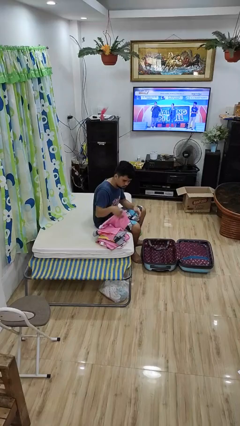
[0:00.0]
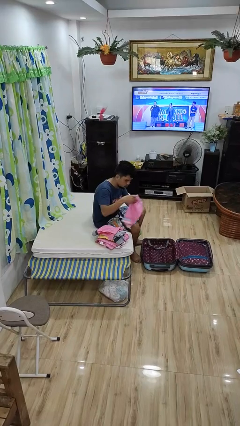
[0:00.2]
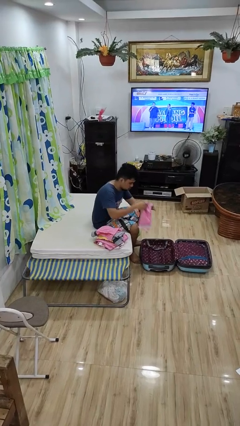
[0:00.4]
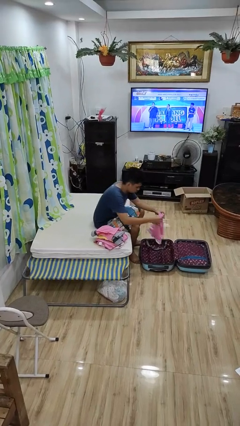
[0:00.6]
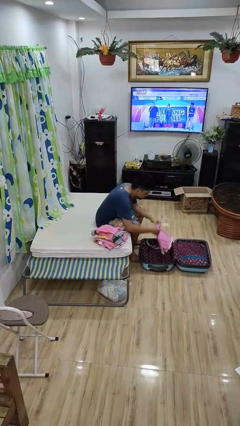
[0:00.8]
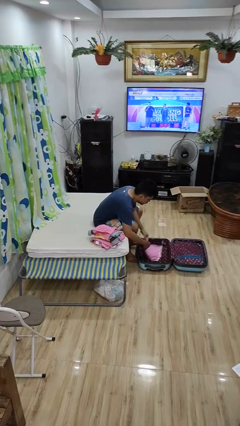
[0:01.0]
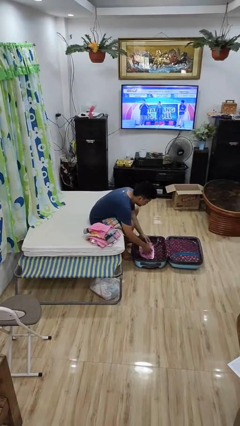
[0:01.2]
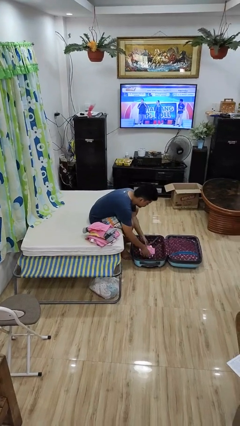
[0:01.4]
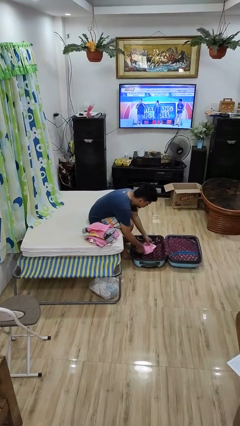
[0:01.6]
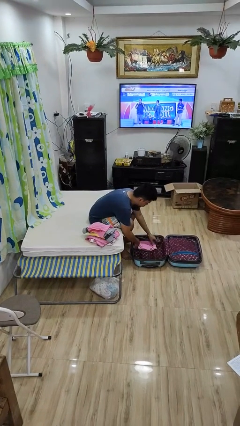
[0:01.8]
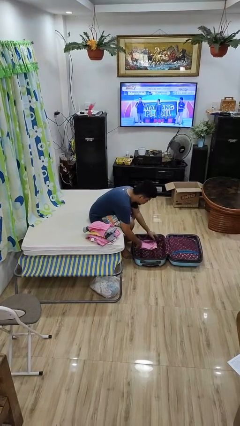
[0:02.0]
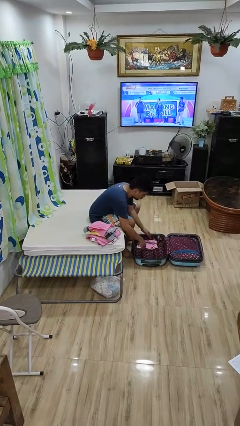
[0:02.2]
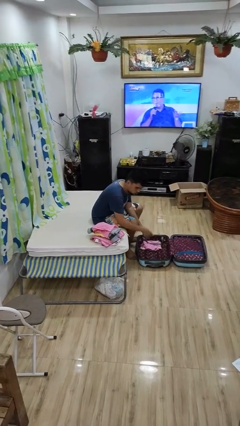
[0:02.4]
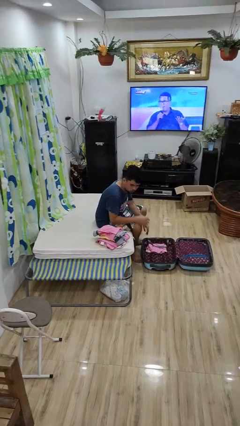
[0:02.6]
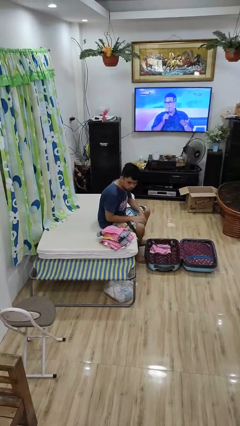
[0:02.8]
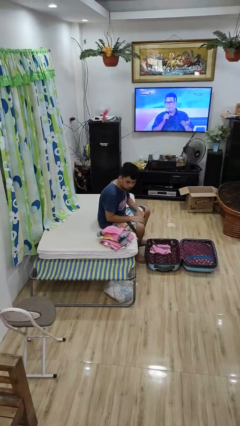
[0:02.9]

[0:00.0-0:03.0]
person loads clothes into suitcase

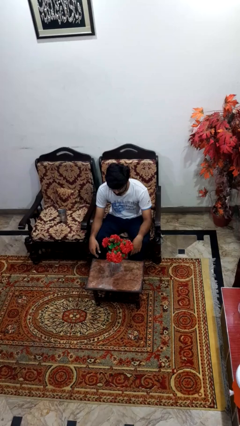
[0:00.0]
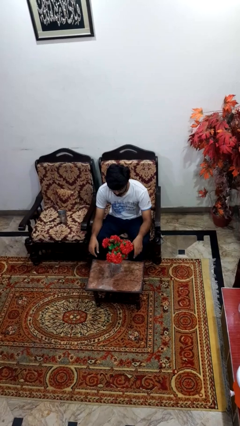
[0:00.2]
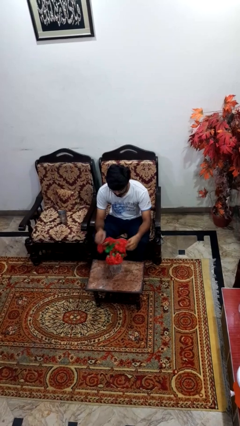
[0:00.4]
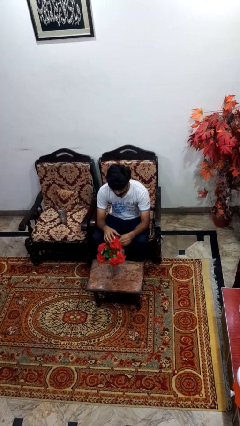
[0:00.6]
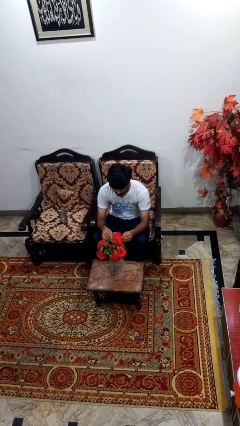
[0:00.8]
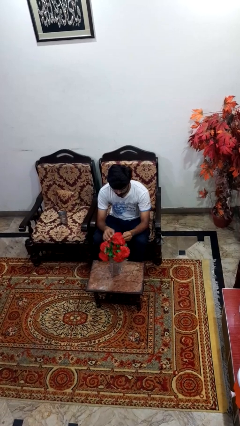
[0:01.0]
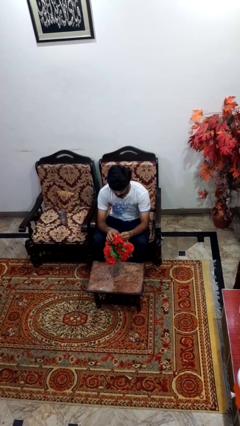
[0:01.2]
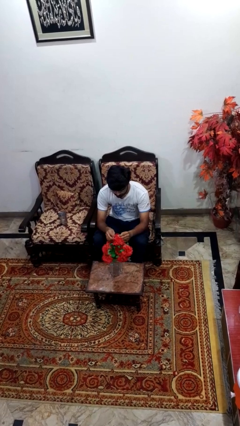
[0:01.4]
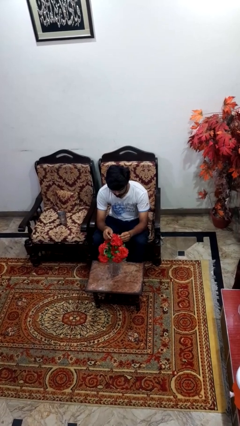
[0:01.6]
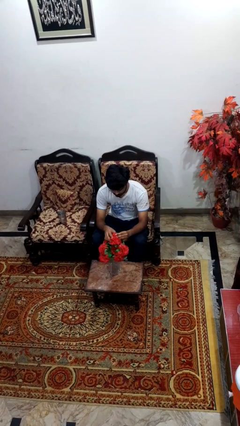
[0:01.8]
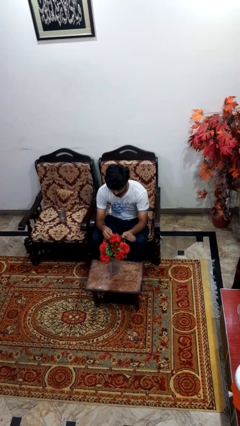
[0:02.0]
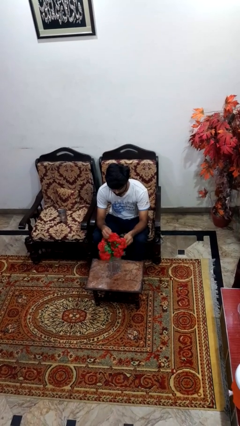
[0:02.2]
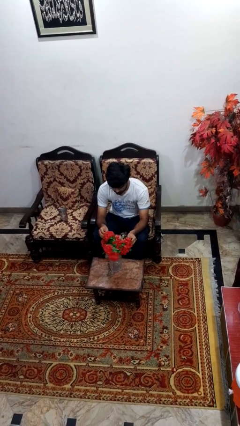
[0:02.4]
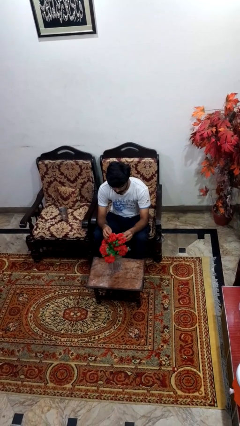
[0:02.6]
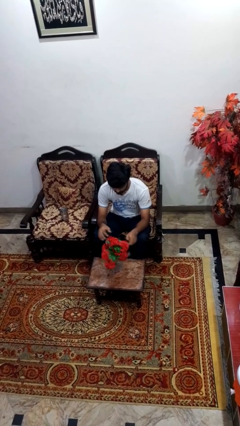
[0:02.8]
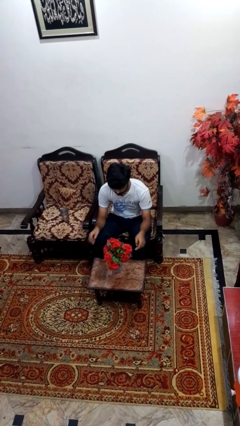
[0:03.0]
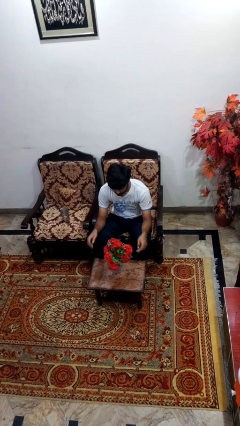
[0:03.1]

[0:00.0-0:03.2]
person arranges flowers in vase

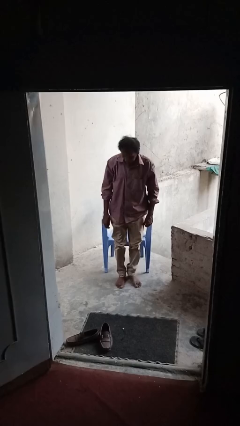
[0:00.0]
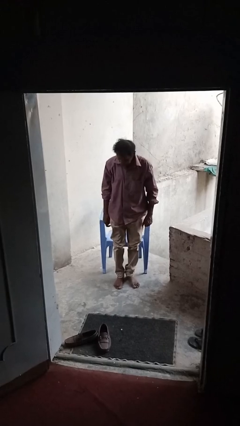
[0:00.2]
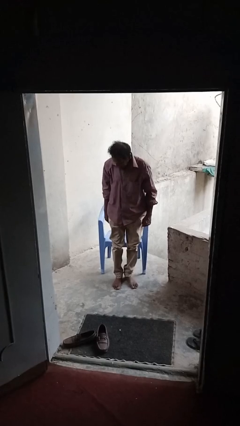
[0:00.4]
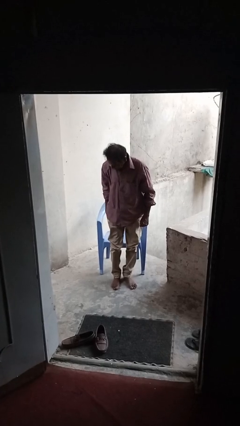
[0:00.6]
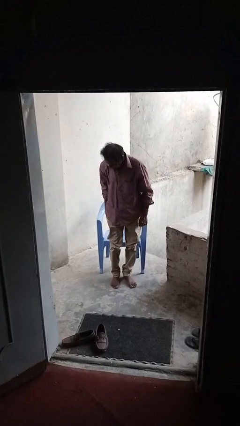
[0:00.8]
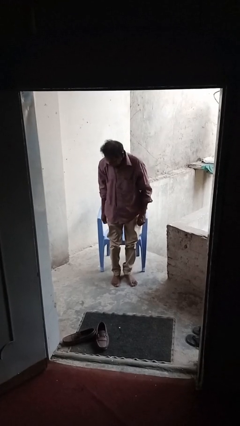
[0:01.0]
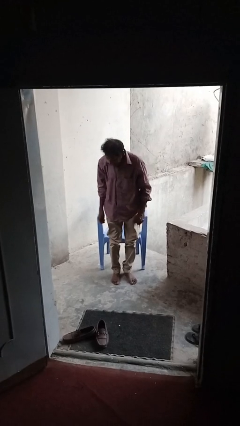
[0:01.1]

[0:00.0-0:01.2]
person stands up from floor

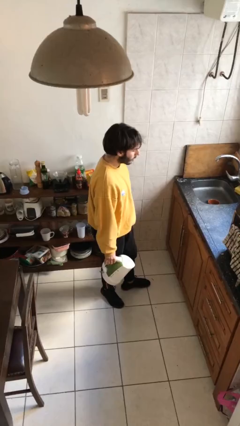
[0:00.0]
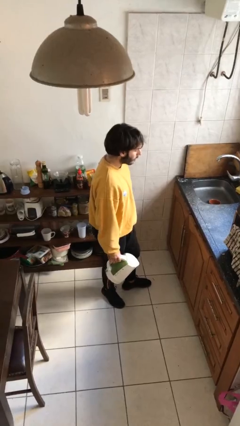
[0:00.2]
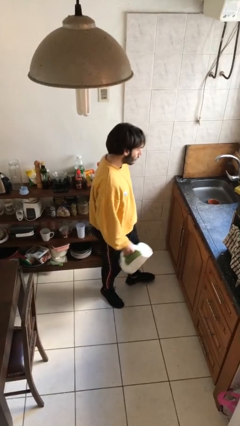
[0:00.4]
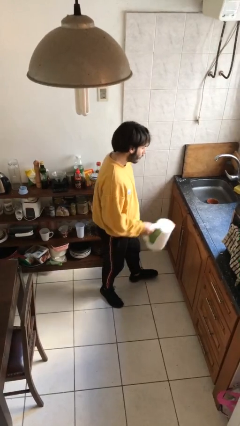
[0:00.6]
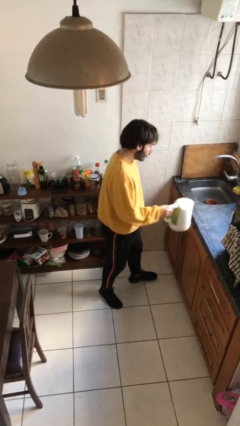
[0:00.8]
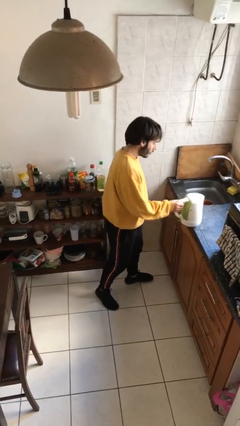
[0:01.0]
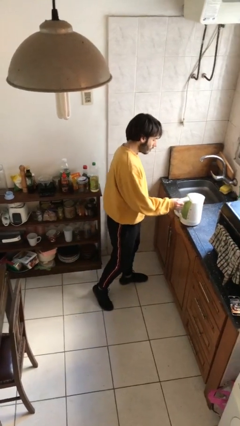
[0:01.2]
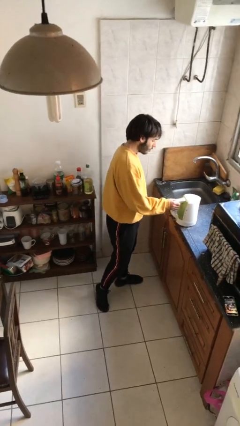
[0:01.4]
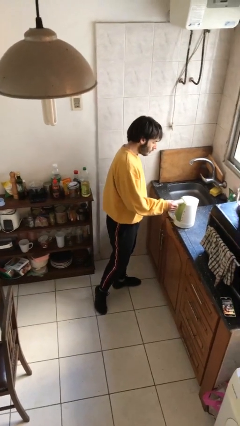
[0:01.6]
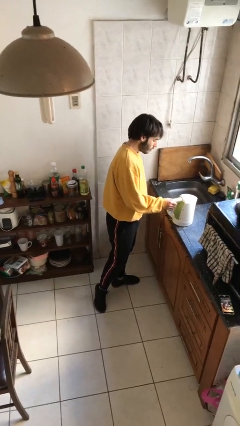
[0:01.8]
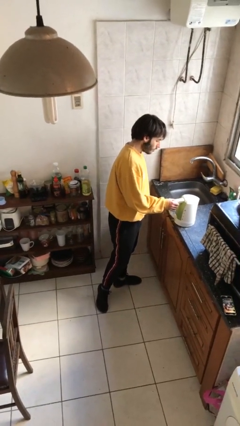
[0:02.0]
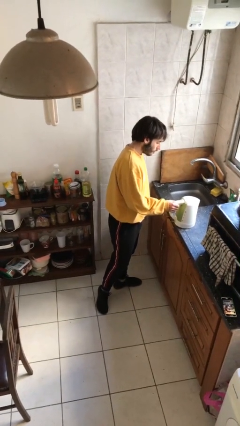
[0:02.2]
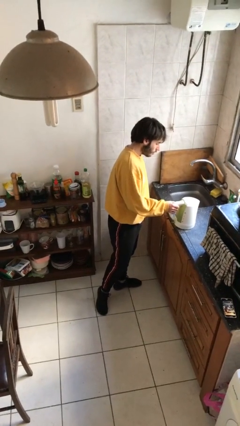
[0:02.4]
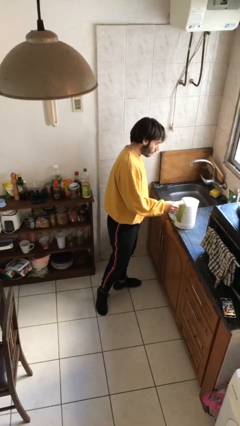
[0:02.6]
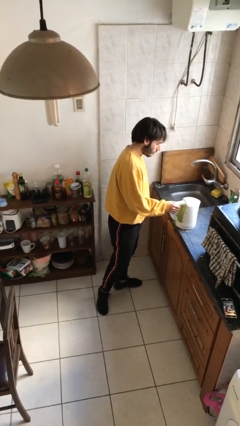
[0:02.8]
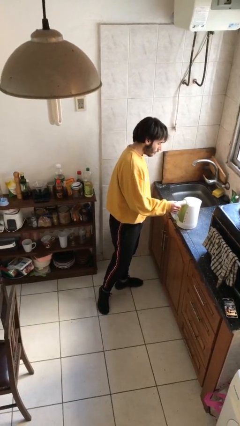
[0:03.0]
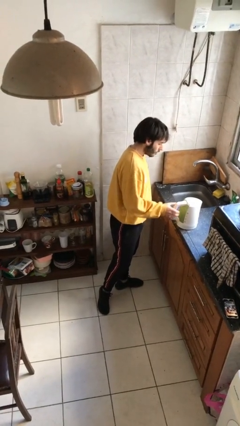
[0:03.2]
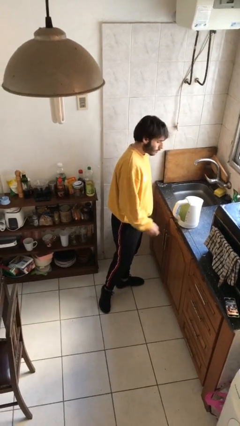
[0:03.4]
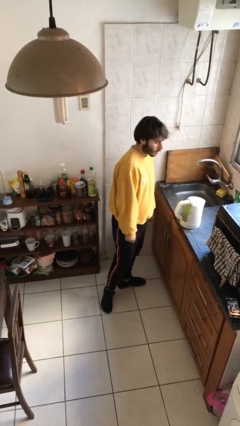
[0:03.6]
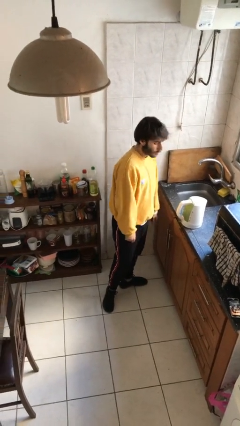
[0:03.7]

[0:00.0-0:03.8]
person puts down object on countertop

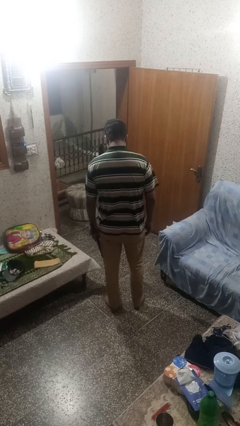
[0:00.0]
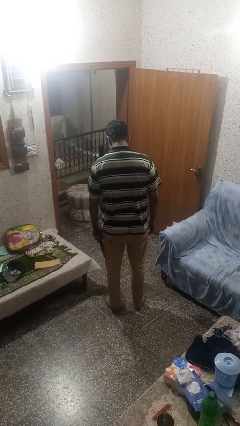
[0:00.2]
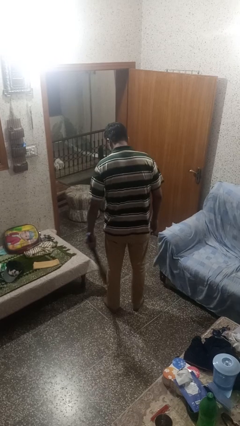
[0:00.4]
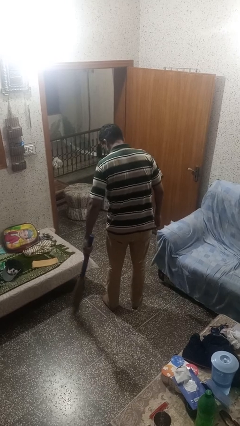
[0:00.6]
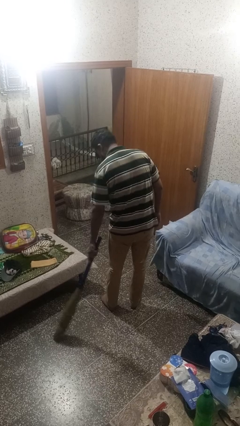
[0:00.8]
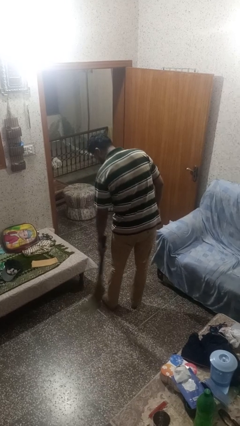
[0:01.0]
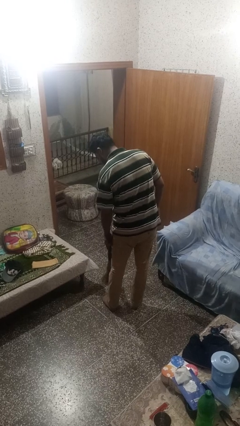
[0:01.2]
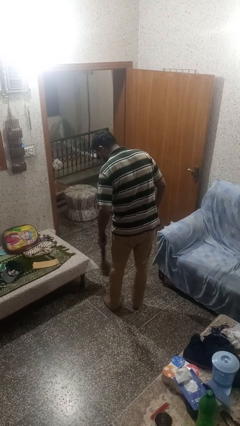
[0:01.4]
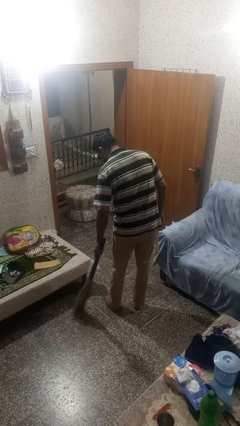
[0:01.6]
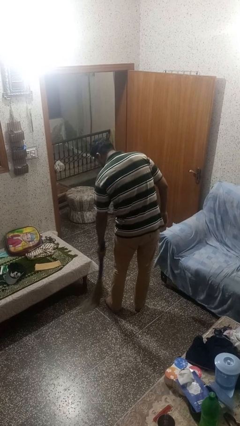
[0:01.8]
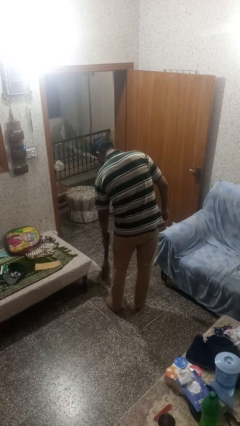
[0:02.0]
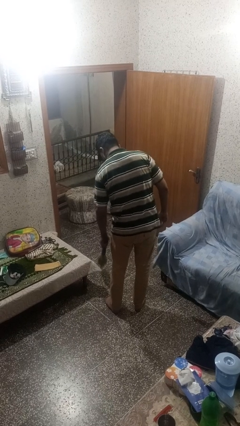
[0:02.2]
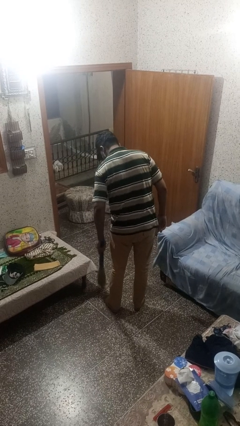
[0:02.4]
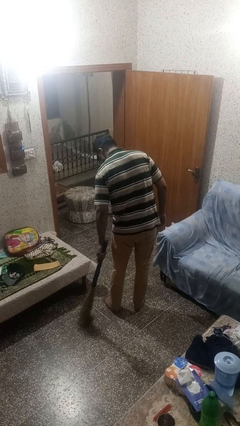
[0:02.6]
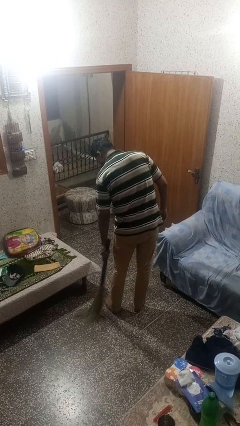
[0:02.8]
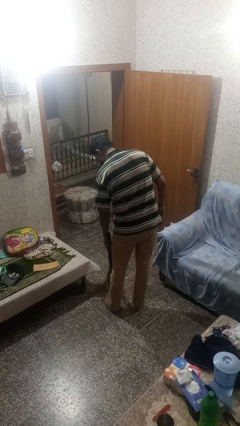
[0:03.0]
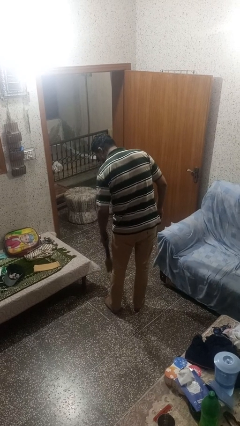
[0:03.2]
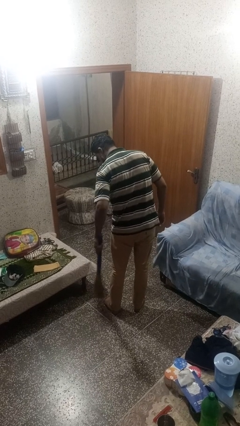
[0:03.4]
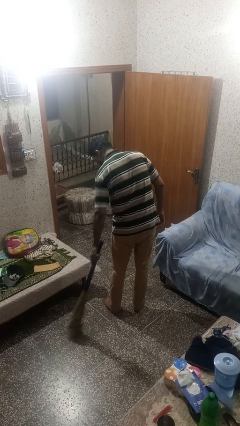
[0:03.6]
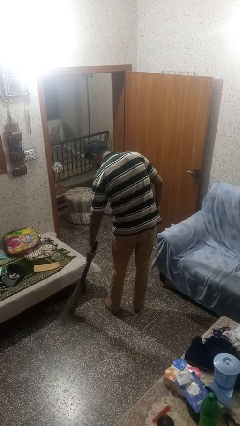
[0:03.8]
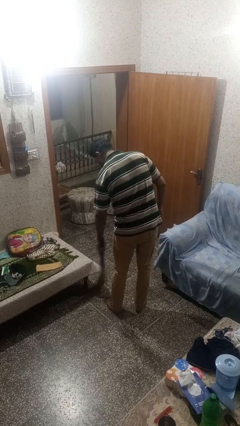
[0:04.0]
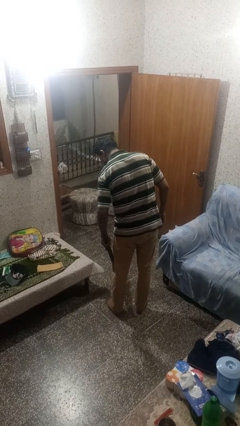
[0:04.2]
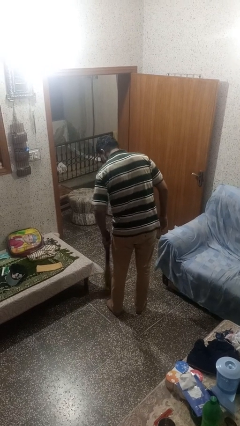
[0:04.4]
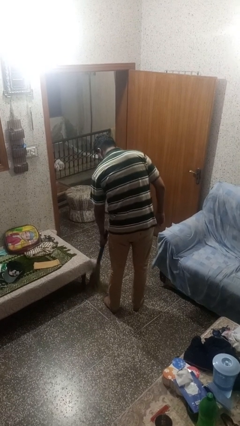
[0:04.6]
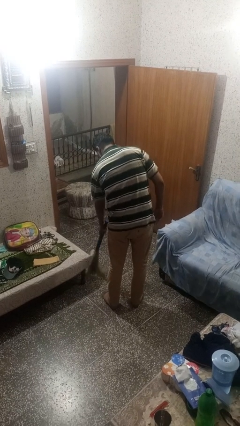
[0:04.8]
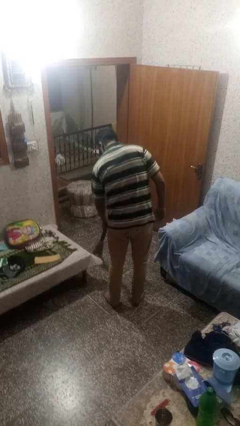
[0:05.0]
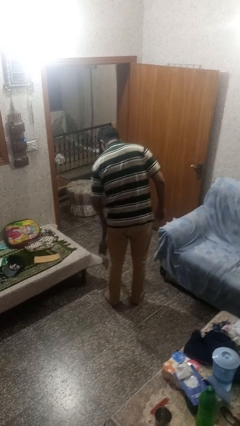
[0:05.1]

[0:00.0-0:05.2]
person sweeps floor

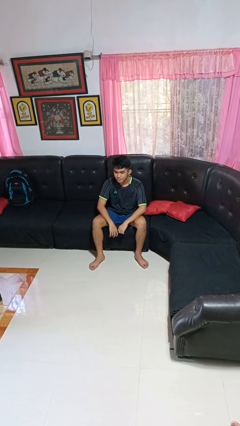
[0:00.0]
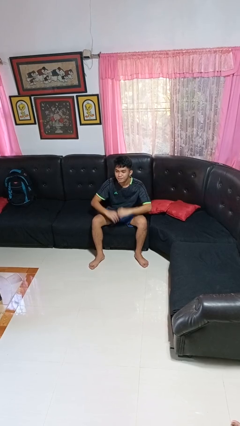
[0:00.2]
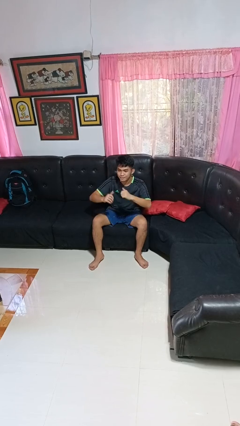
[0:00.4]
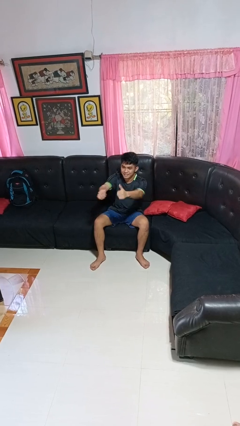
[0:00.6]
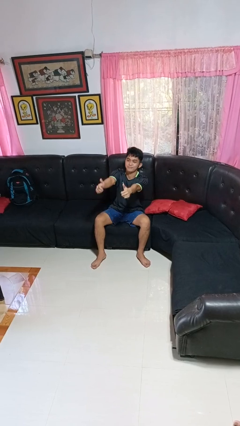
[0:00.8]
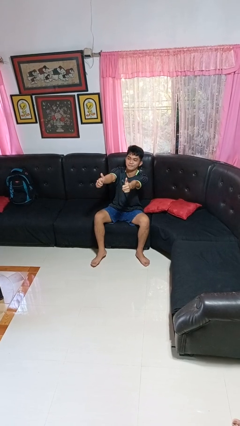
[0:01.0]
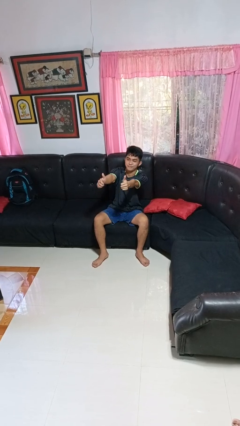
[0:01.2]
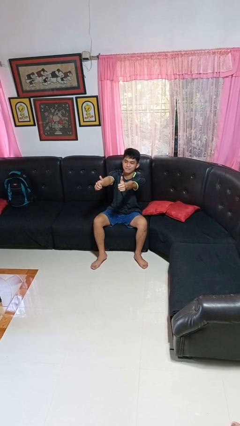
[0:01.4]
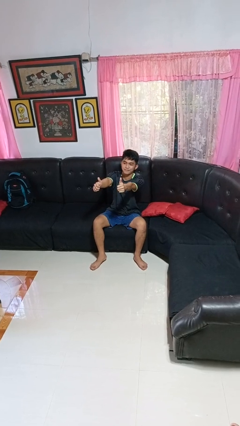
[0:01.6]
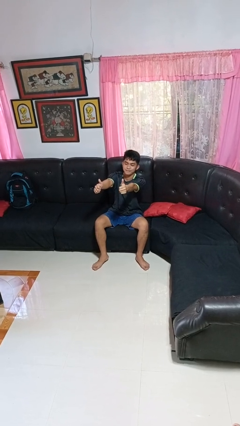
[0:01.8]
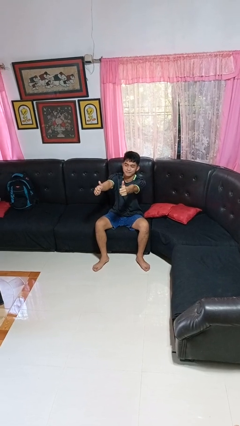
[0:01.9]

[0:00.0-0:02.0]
person gestures thumbs up
